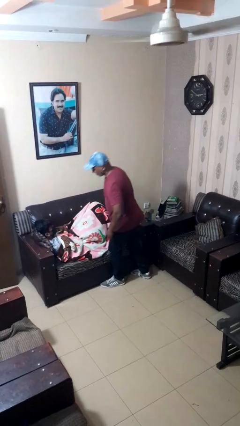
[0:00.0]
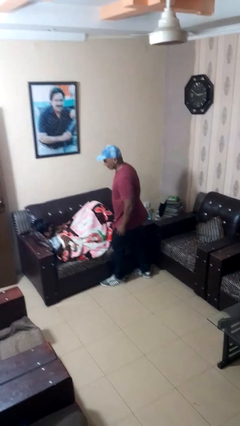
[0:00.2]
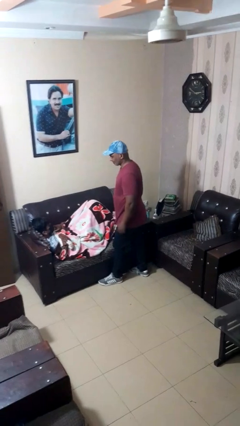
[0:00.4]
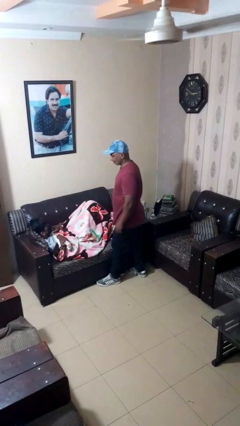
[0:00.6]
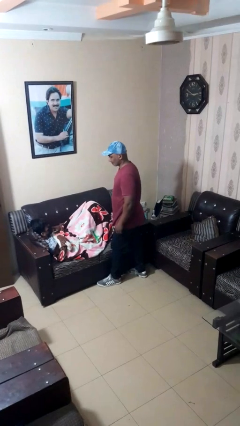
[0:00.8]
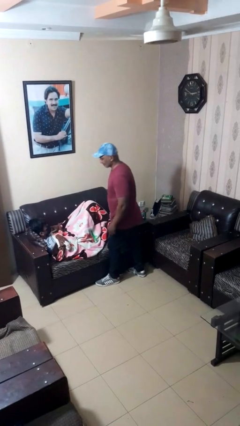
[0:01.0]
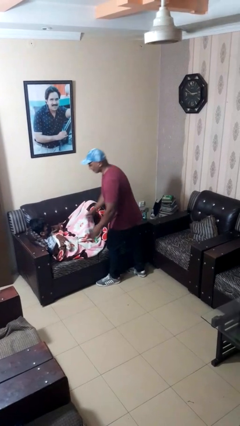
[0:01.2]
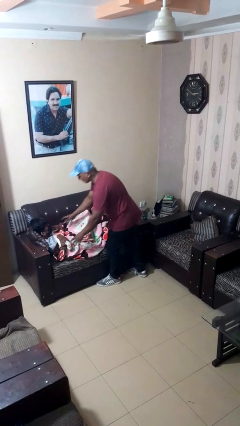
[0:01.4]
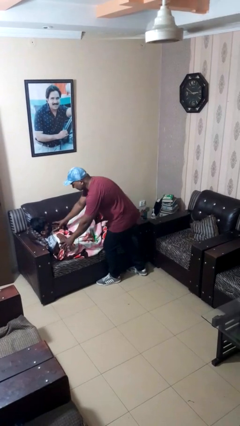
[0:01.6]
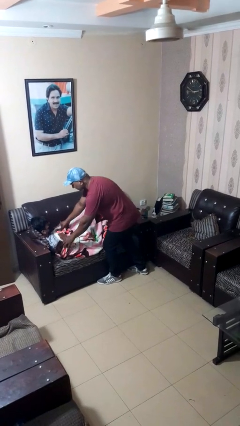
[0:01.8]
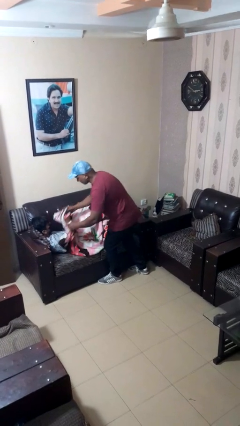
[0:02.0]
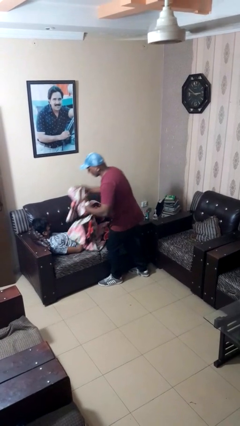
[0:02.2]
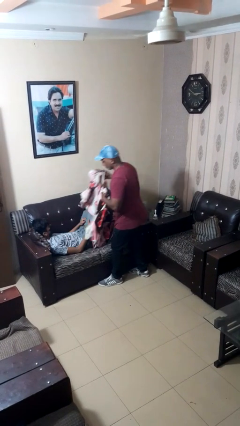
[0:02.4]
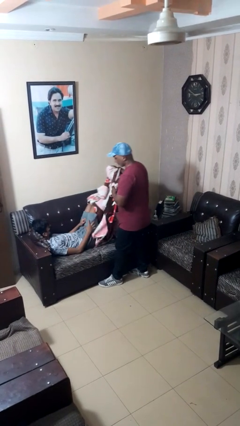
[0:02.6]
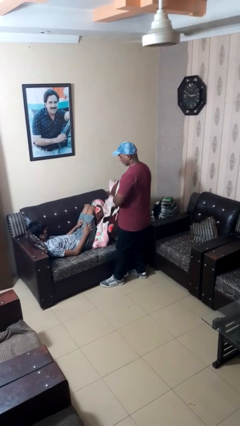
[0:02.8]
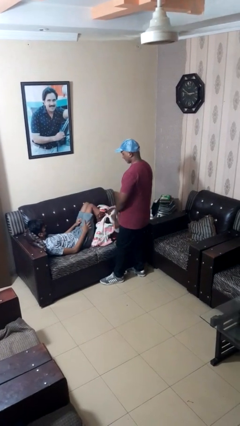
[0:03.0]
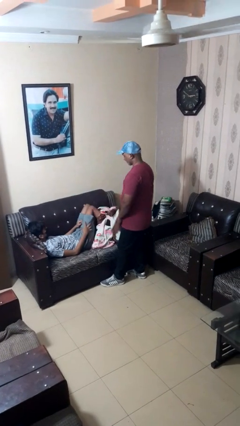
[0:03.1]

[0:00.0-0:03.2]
person uncovers friend with blanket

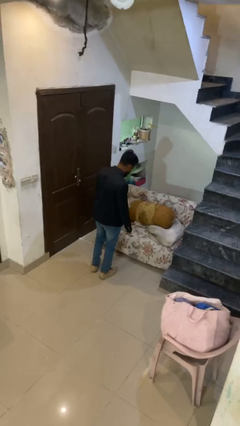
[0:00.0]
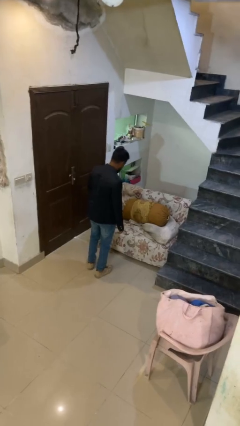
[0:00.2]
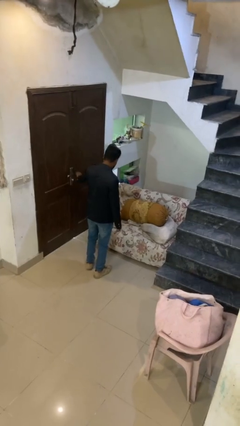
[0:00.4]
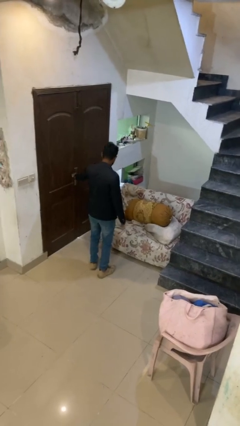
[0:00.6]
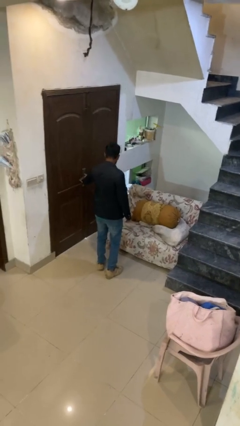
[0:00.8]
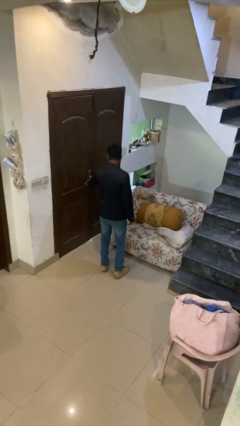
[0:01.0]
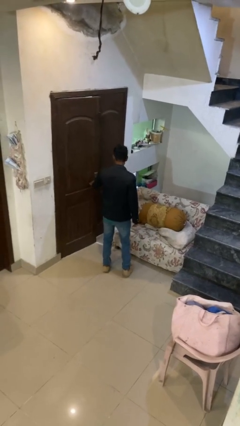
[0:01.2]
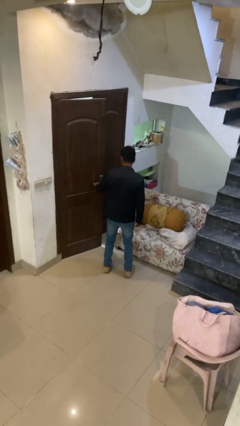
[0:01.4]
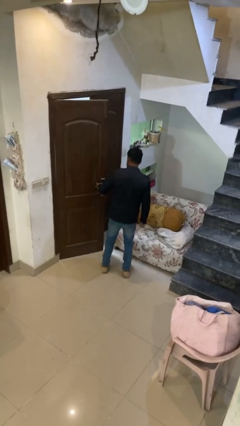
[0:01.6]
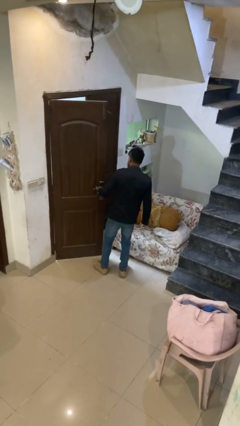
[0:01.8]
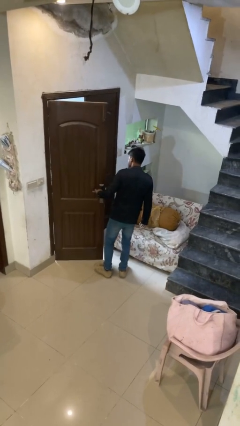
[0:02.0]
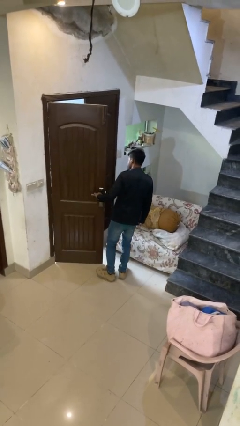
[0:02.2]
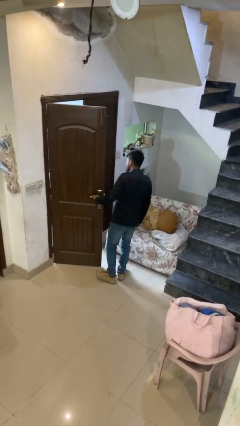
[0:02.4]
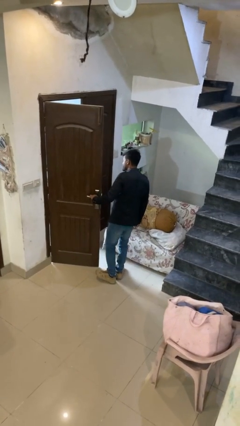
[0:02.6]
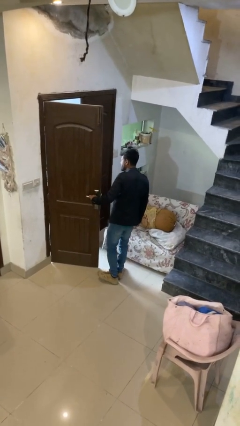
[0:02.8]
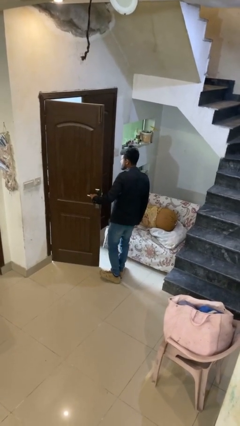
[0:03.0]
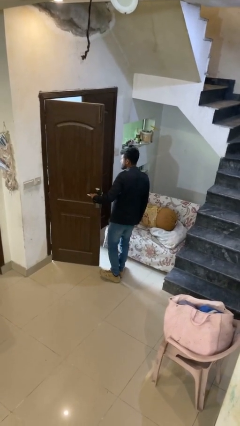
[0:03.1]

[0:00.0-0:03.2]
person opens facility door

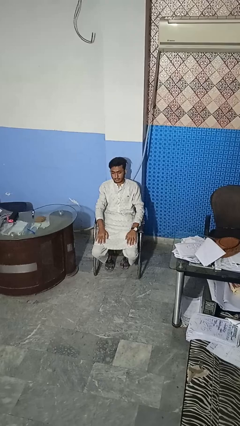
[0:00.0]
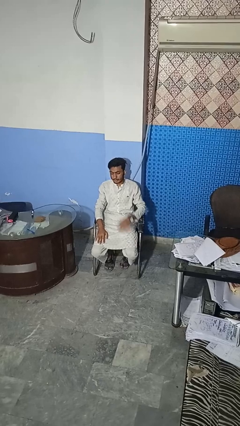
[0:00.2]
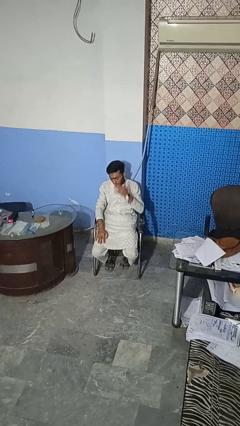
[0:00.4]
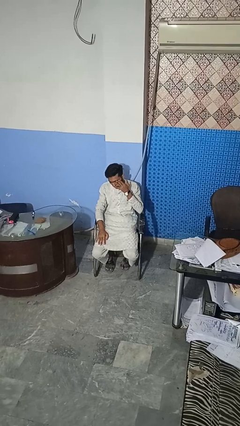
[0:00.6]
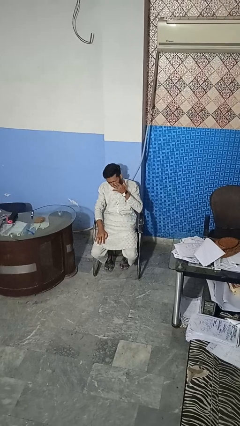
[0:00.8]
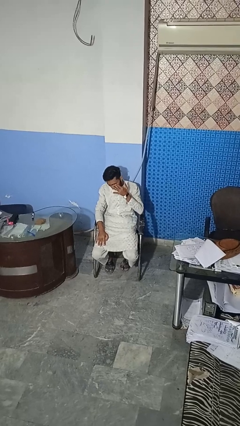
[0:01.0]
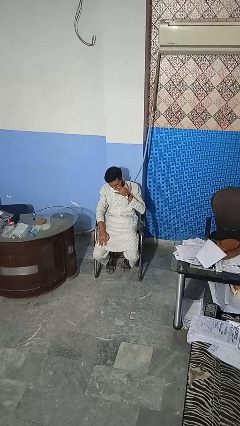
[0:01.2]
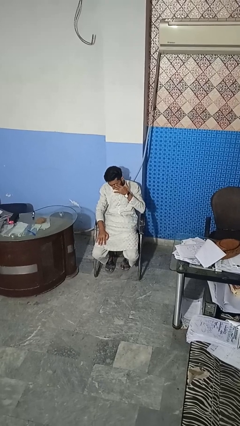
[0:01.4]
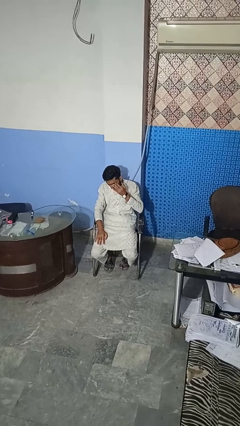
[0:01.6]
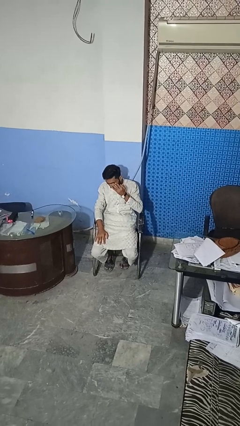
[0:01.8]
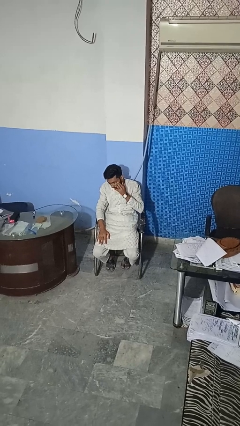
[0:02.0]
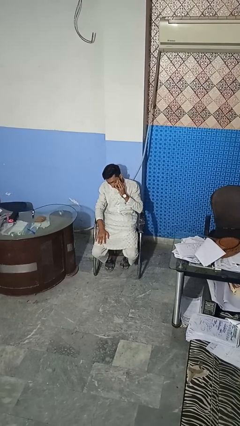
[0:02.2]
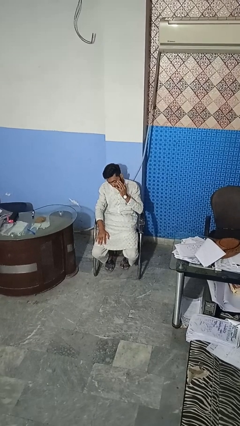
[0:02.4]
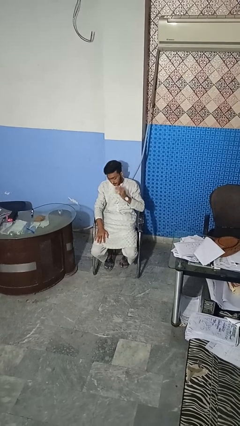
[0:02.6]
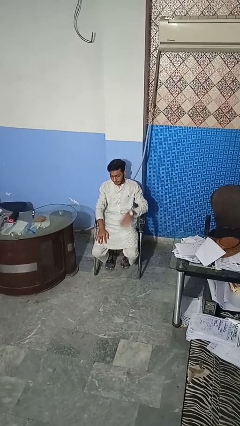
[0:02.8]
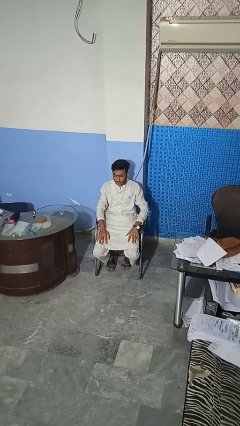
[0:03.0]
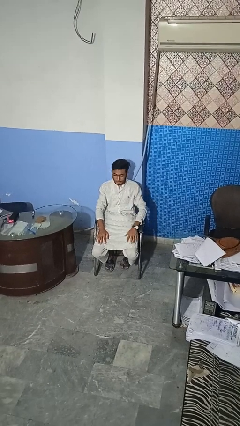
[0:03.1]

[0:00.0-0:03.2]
person rubs eyes

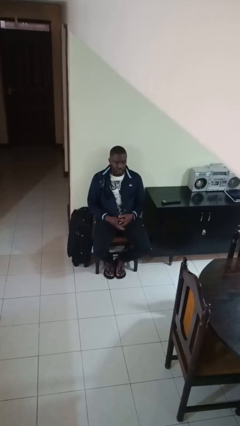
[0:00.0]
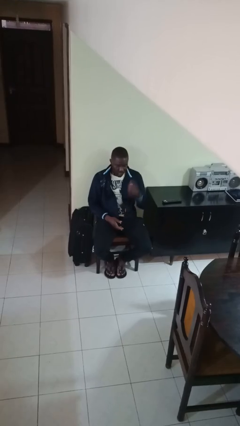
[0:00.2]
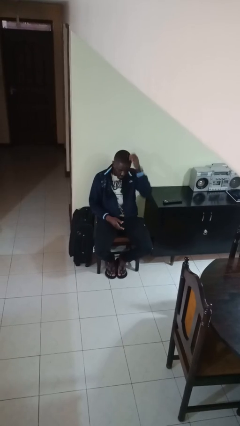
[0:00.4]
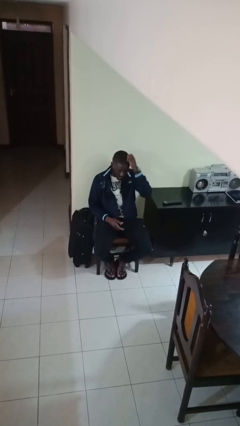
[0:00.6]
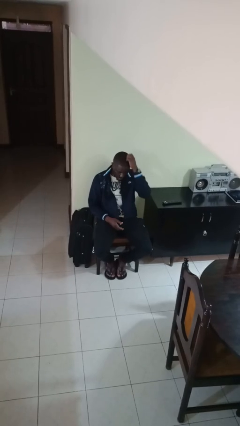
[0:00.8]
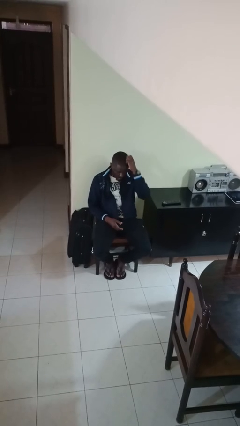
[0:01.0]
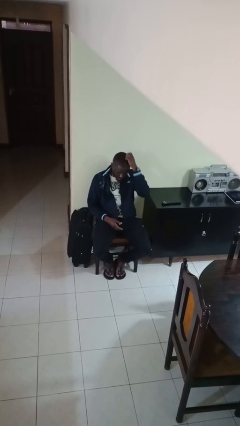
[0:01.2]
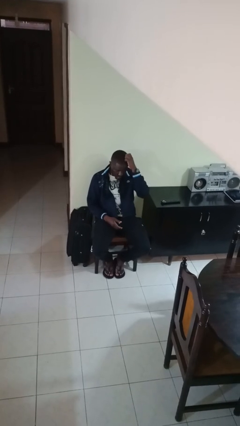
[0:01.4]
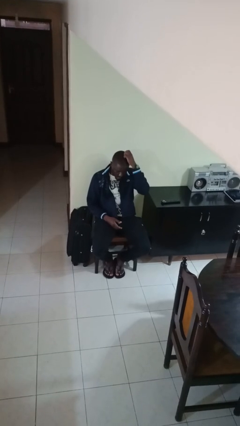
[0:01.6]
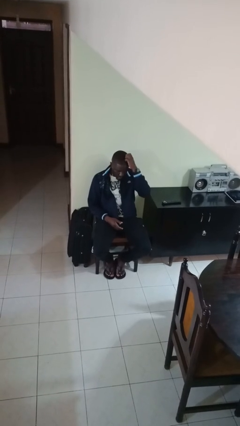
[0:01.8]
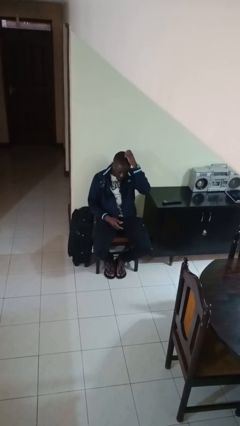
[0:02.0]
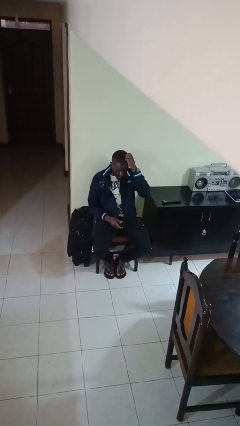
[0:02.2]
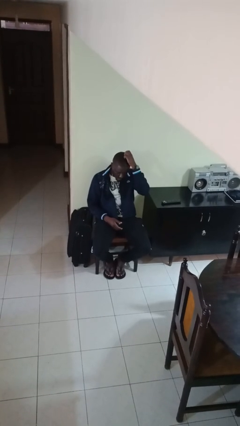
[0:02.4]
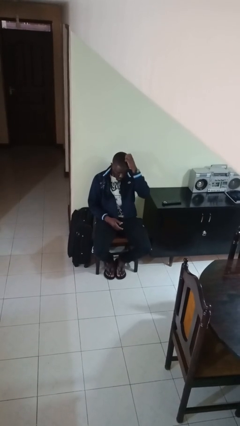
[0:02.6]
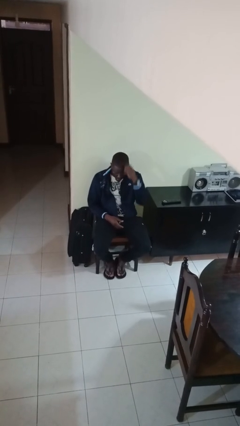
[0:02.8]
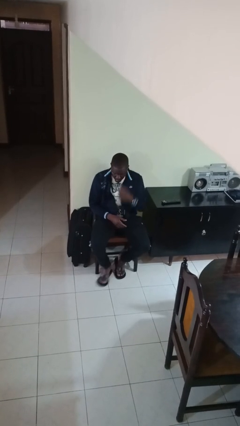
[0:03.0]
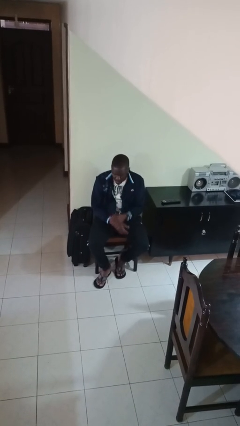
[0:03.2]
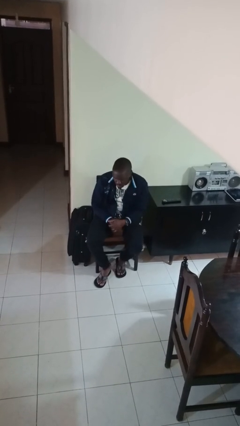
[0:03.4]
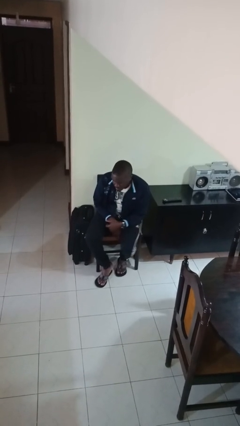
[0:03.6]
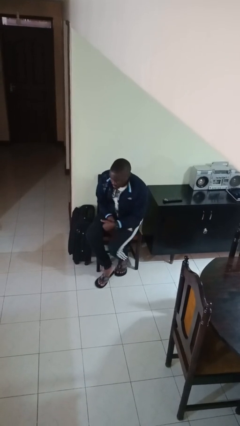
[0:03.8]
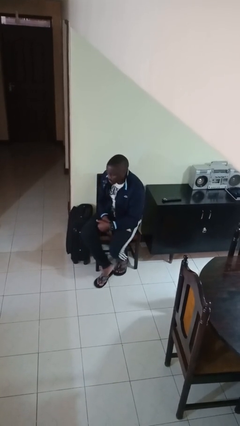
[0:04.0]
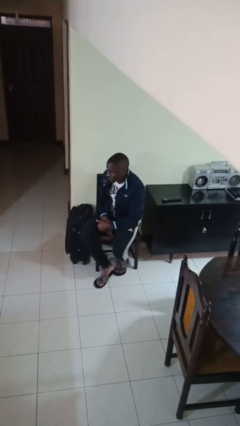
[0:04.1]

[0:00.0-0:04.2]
person scratches face

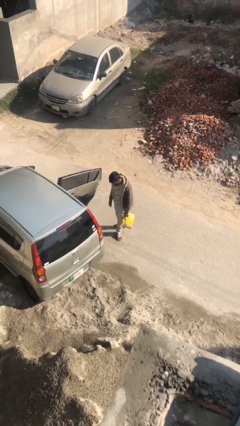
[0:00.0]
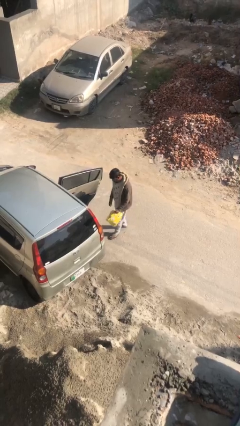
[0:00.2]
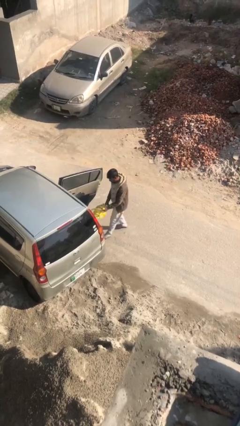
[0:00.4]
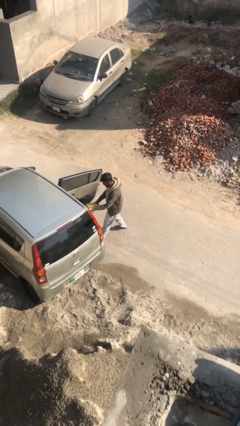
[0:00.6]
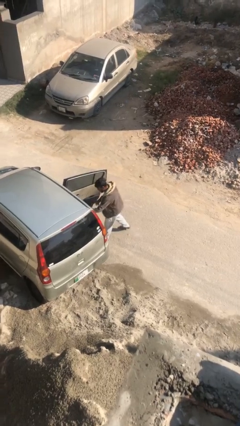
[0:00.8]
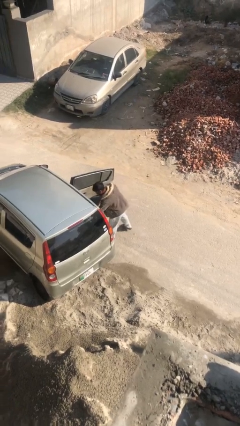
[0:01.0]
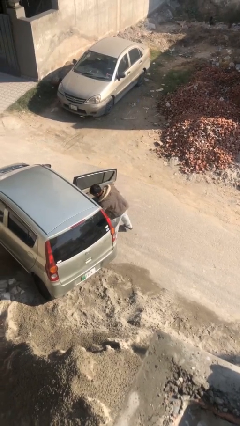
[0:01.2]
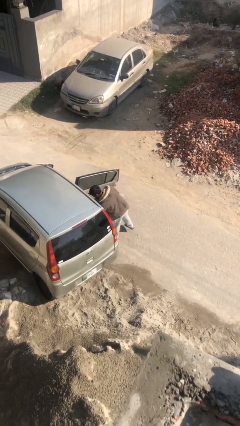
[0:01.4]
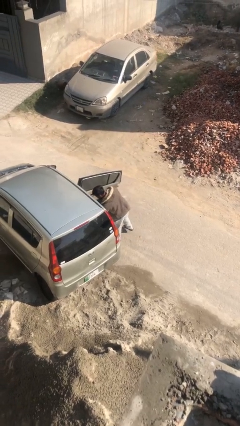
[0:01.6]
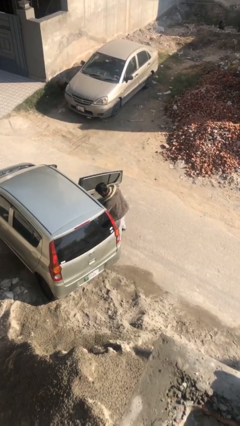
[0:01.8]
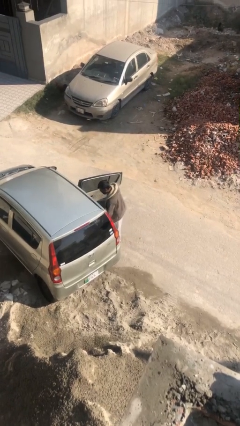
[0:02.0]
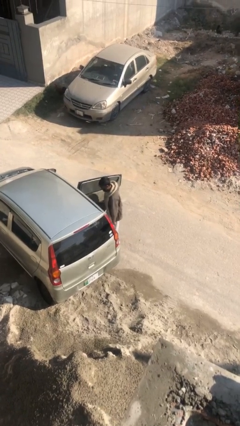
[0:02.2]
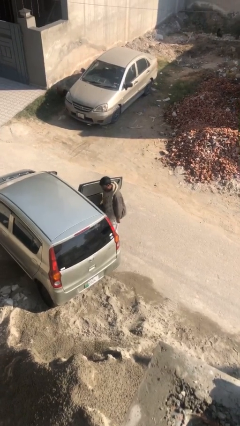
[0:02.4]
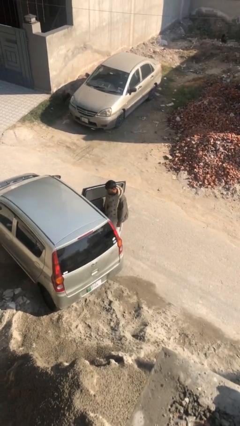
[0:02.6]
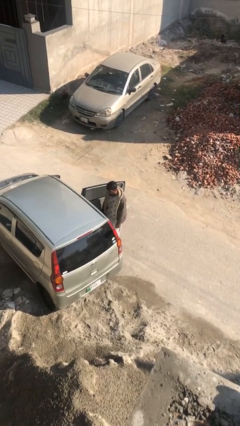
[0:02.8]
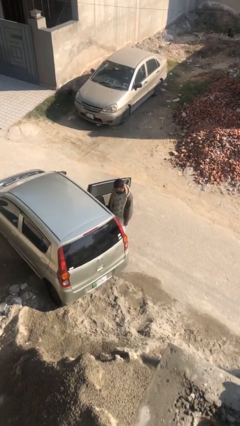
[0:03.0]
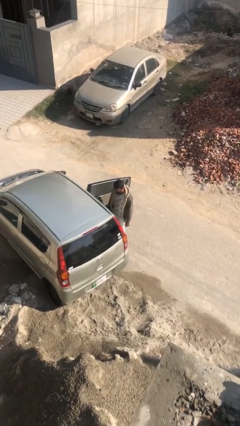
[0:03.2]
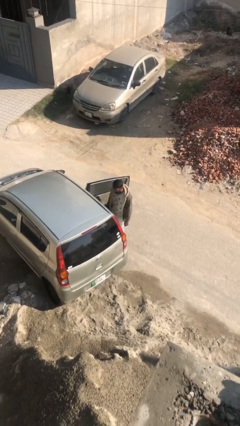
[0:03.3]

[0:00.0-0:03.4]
person loads car

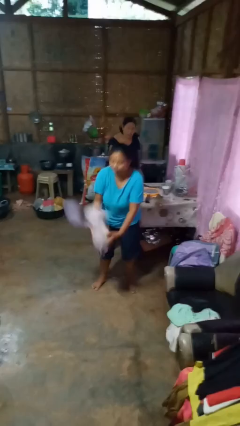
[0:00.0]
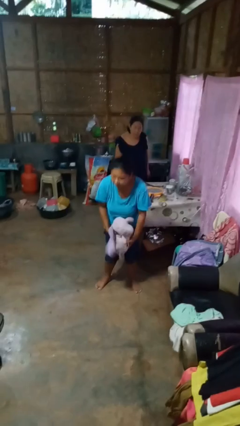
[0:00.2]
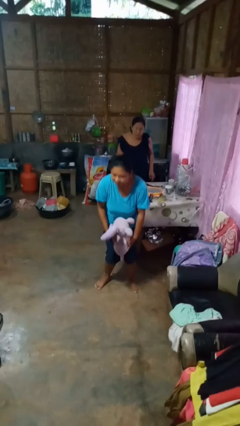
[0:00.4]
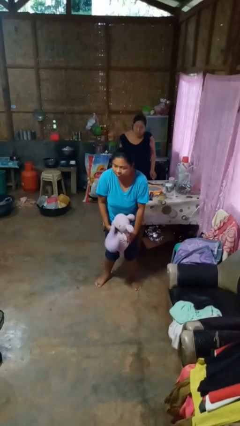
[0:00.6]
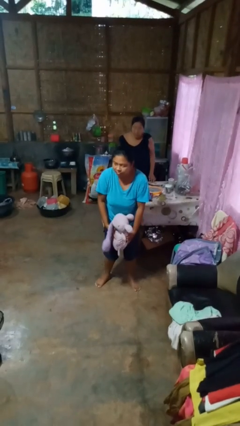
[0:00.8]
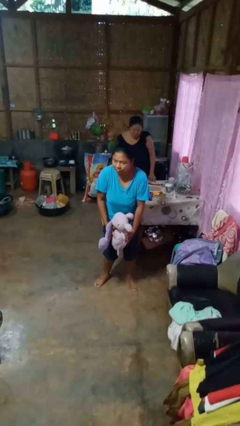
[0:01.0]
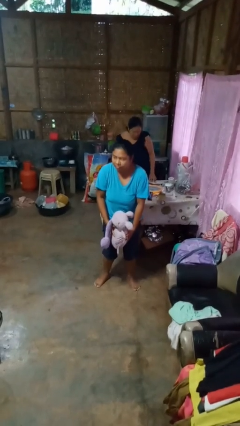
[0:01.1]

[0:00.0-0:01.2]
person catches dropped object
